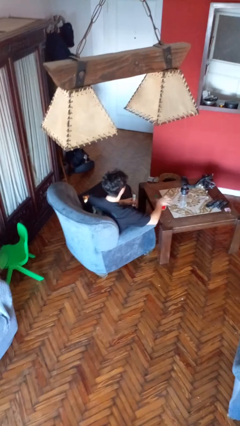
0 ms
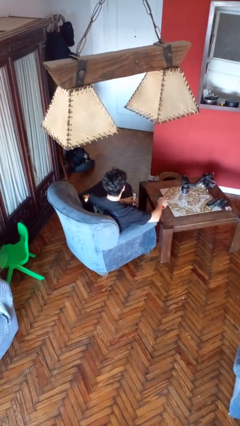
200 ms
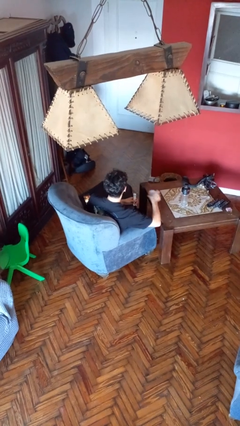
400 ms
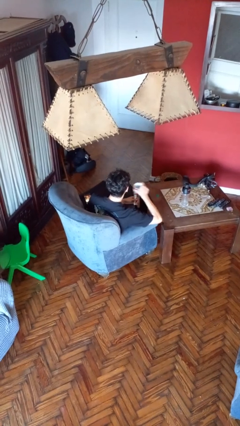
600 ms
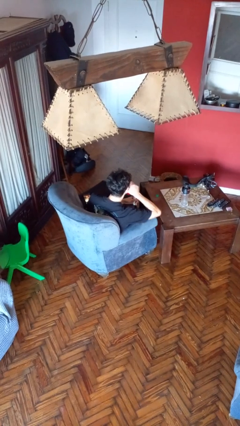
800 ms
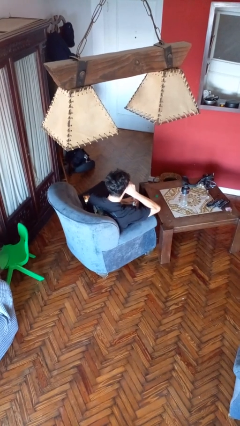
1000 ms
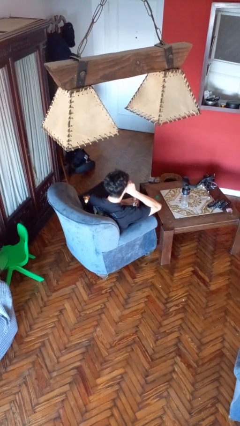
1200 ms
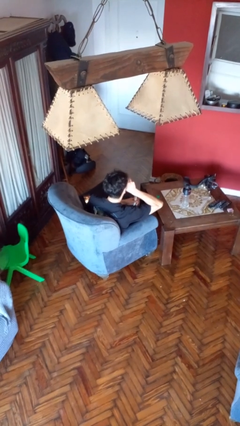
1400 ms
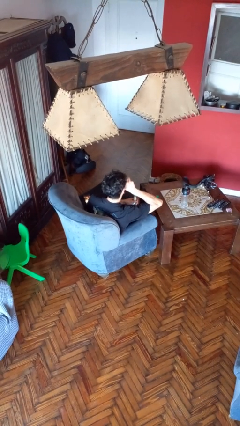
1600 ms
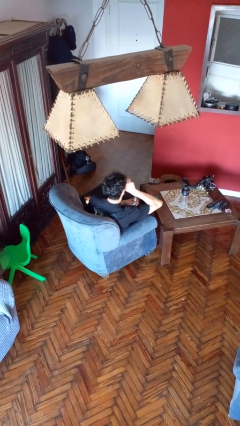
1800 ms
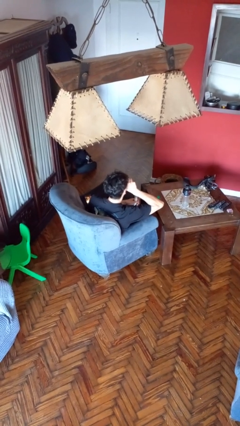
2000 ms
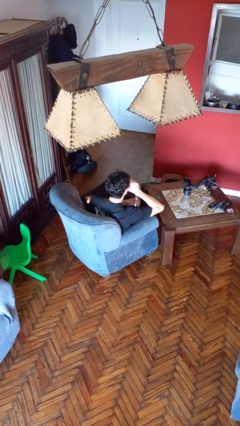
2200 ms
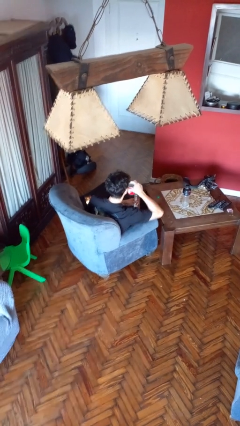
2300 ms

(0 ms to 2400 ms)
person drinks from cup

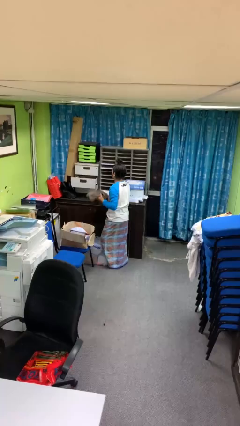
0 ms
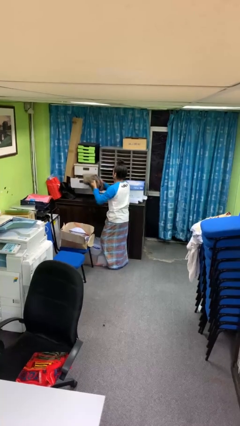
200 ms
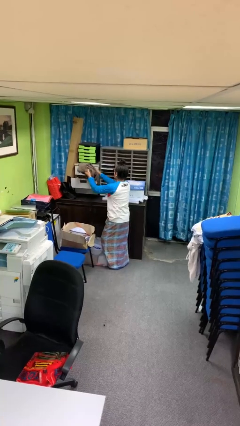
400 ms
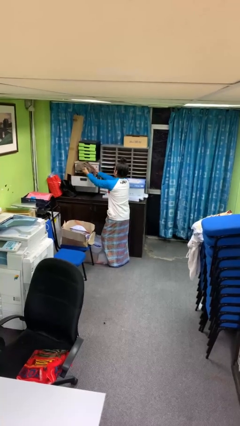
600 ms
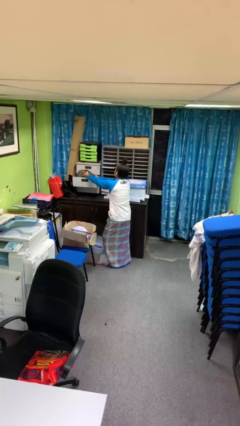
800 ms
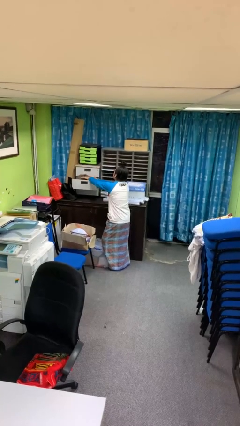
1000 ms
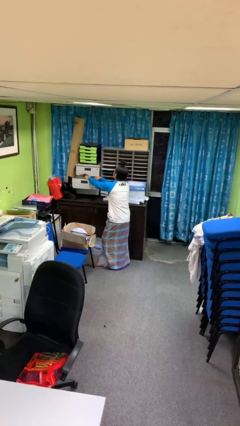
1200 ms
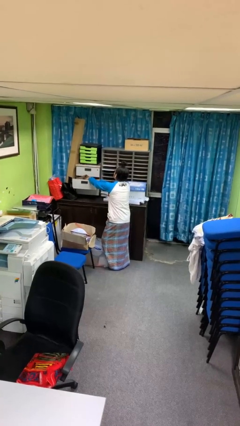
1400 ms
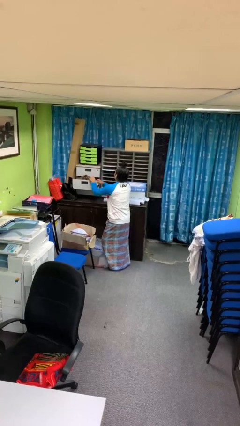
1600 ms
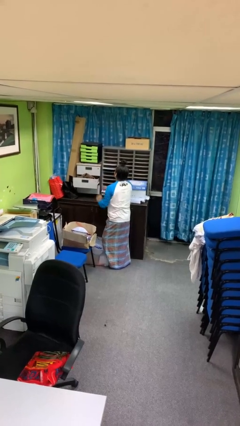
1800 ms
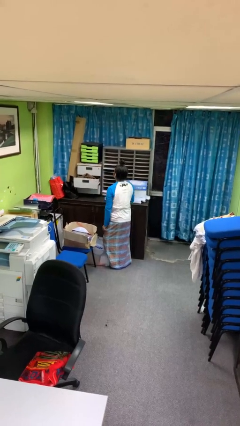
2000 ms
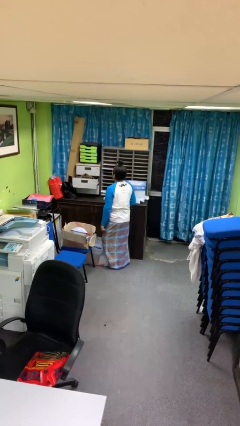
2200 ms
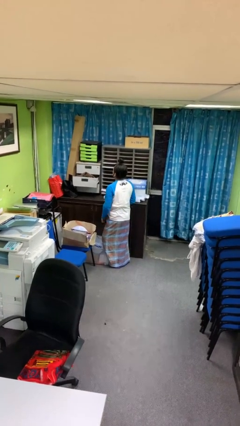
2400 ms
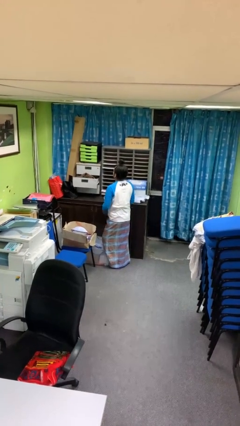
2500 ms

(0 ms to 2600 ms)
person puts clothes into dresser

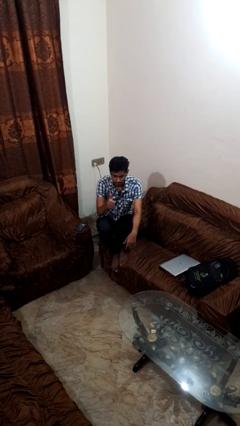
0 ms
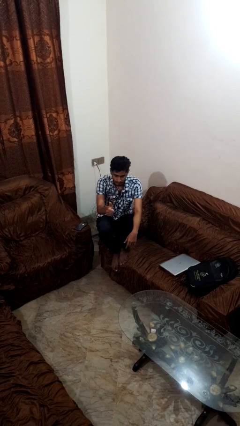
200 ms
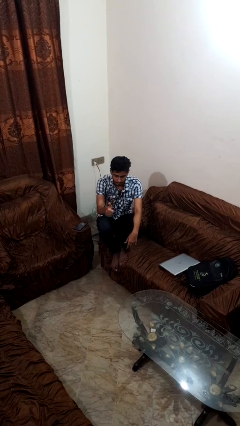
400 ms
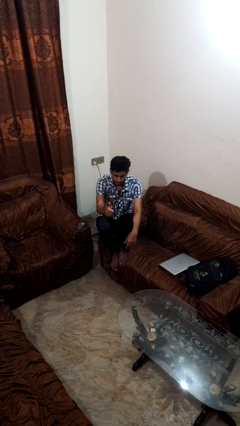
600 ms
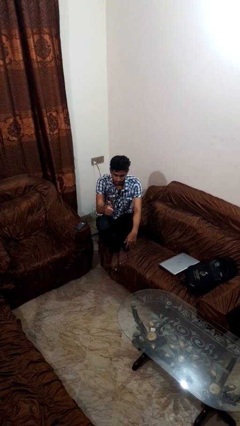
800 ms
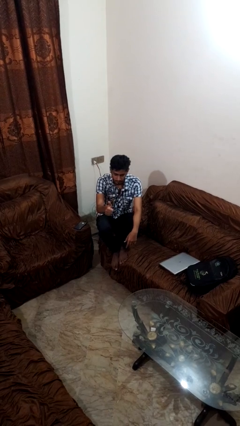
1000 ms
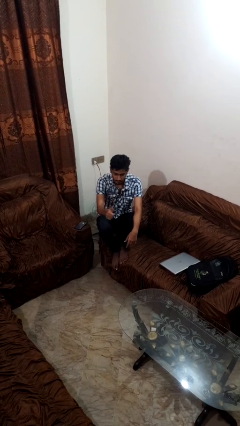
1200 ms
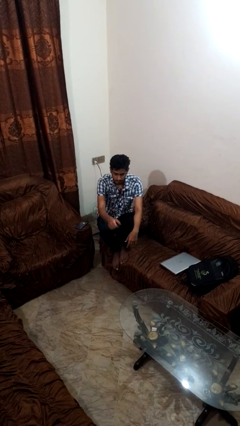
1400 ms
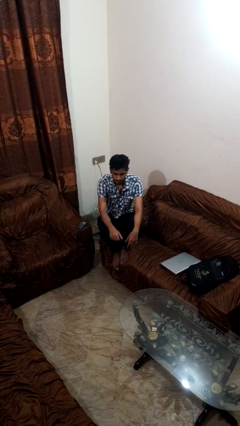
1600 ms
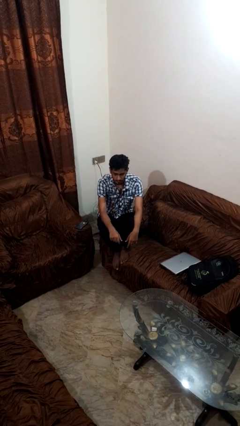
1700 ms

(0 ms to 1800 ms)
person gestures thumbs up

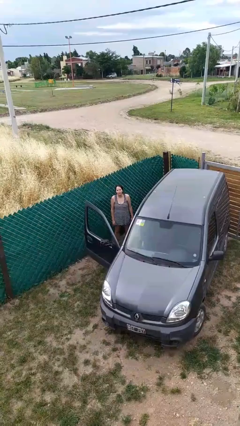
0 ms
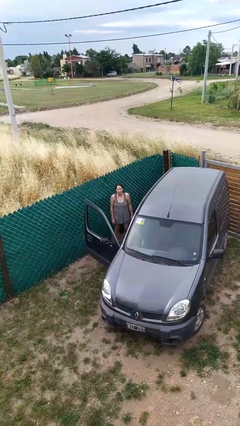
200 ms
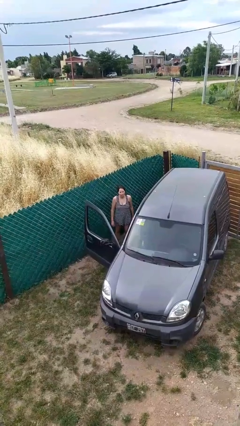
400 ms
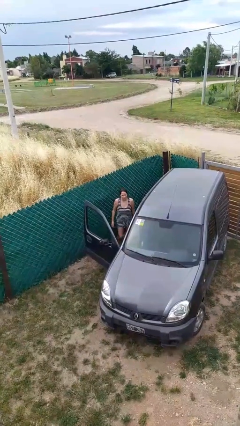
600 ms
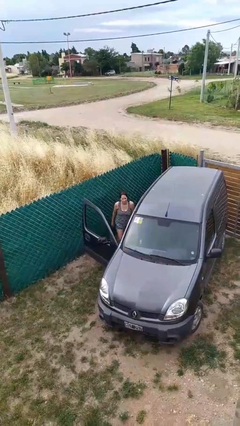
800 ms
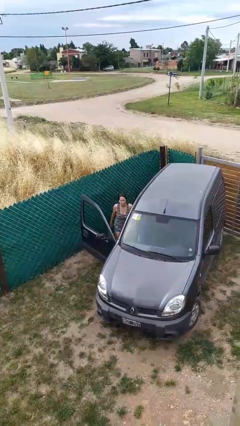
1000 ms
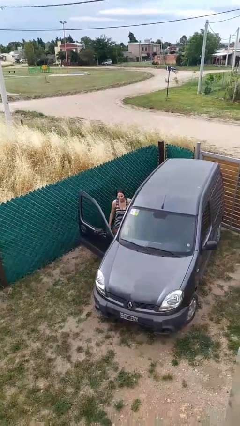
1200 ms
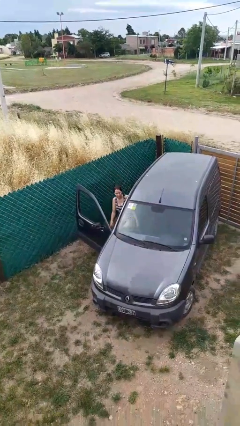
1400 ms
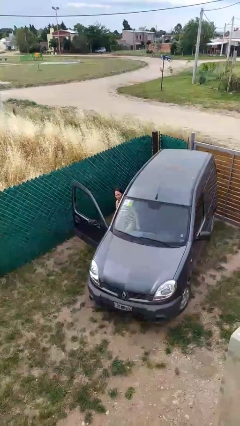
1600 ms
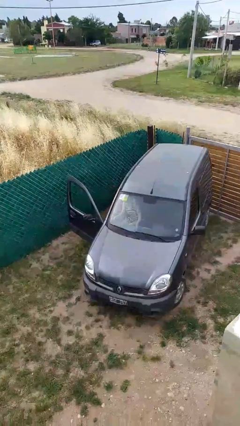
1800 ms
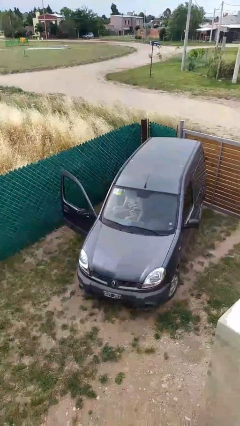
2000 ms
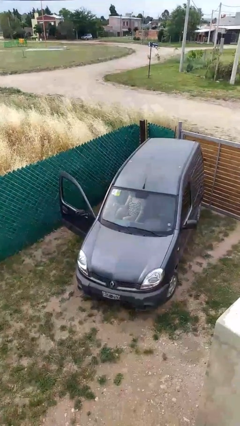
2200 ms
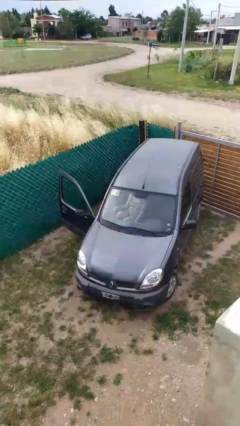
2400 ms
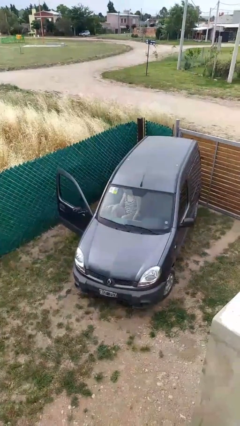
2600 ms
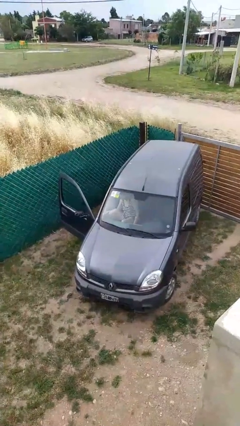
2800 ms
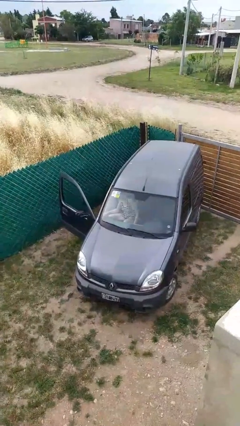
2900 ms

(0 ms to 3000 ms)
person enters car

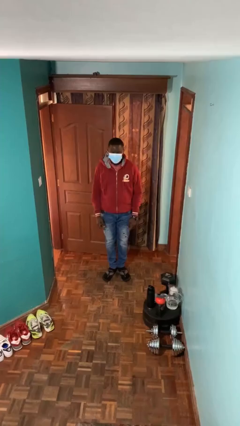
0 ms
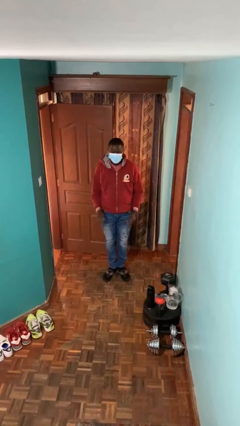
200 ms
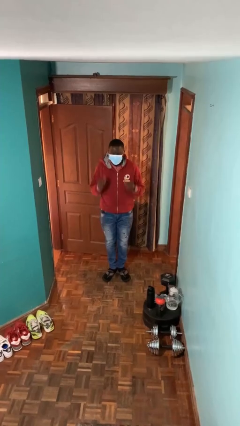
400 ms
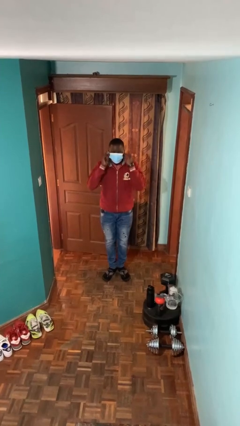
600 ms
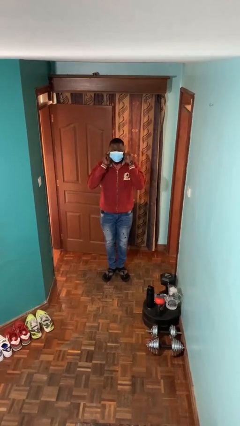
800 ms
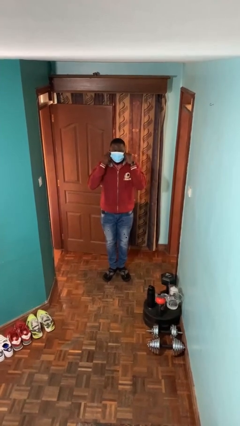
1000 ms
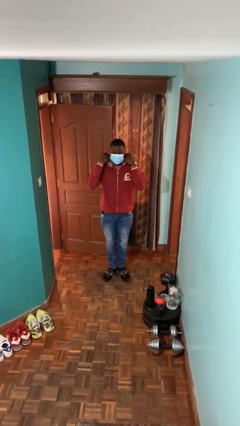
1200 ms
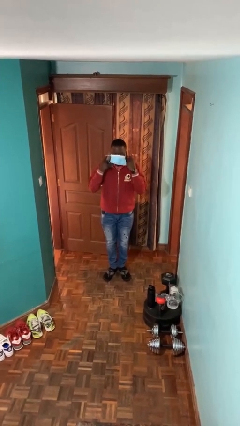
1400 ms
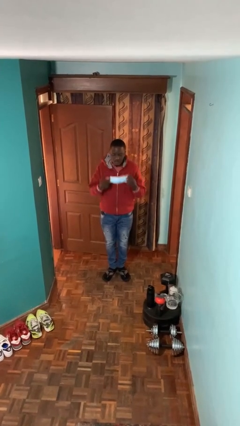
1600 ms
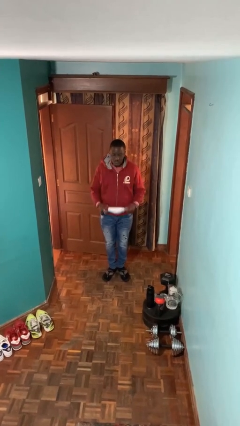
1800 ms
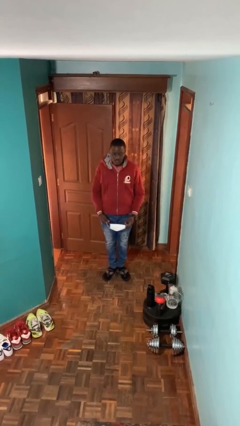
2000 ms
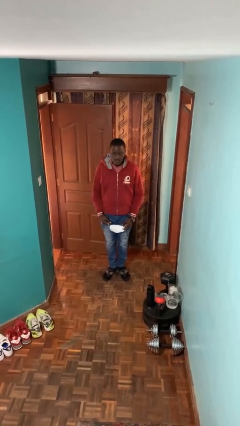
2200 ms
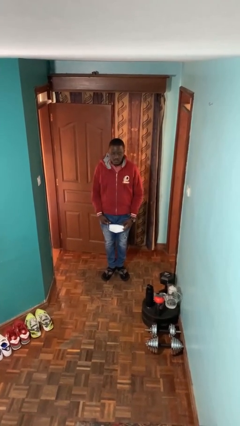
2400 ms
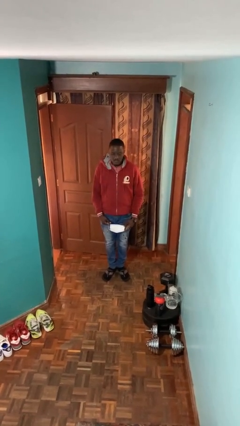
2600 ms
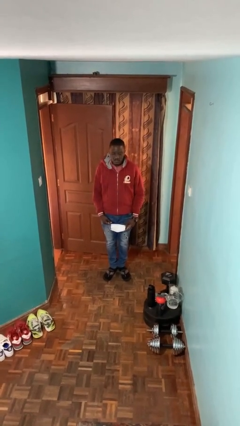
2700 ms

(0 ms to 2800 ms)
person takes off facemask

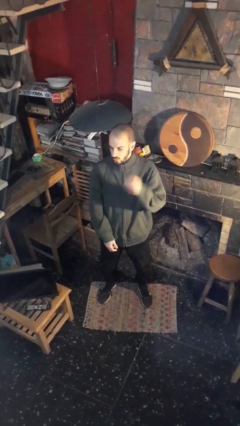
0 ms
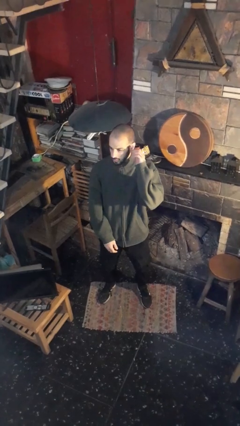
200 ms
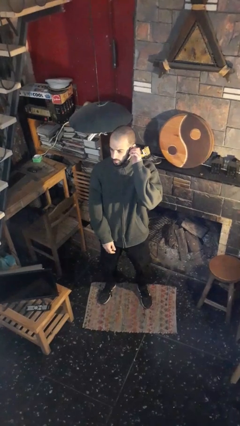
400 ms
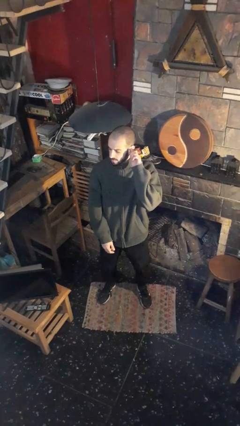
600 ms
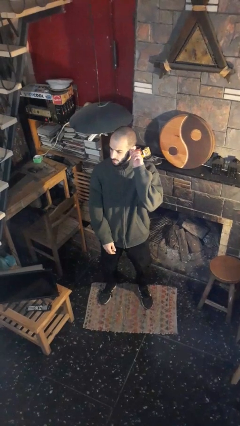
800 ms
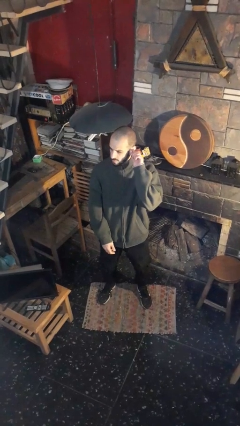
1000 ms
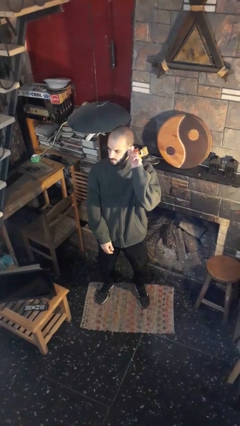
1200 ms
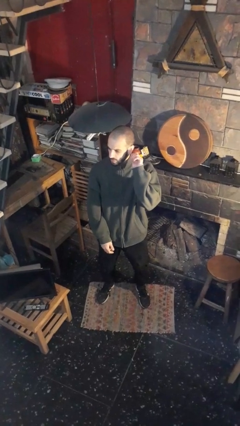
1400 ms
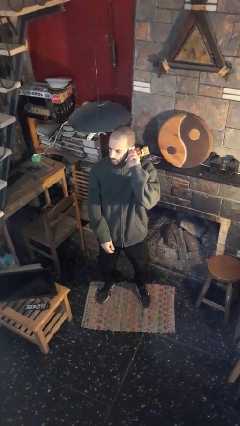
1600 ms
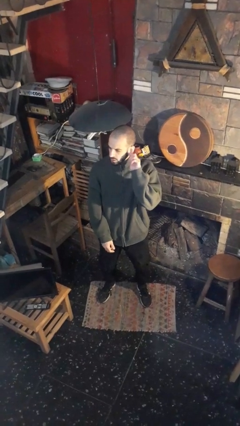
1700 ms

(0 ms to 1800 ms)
person touches earlobe

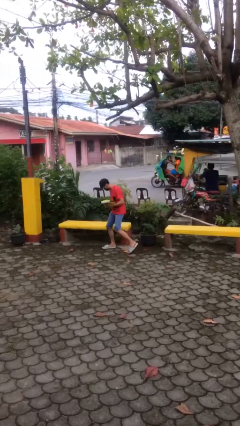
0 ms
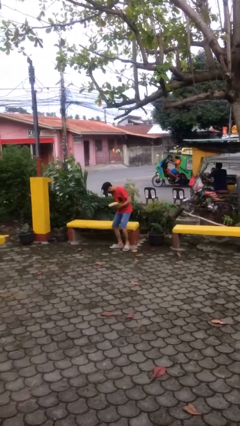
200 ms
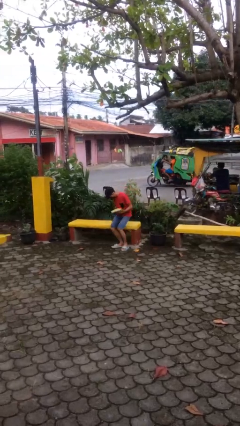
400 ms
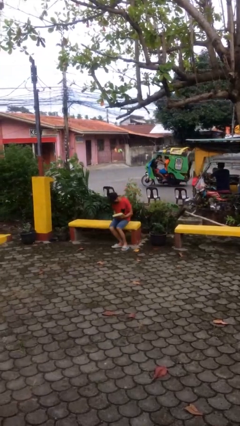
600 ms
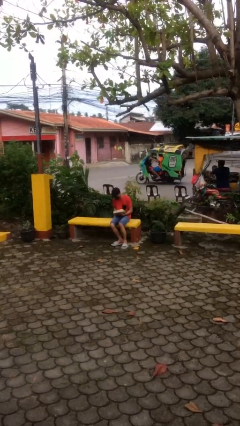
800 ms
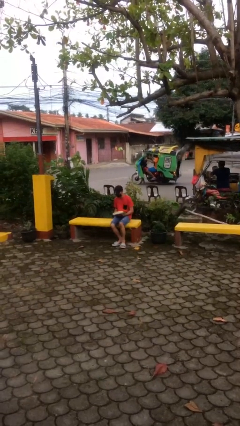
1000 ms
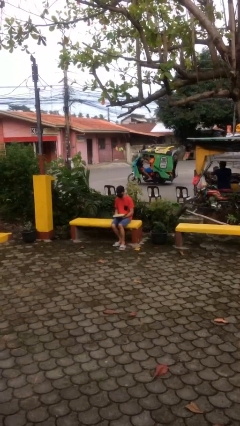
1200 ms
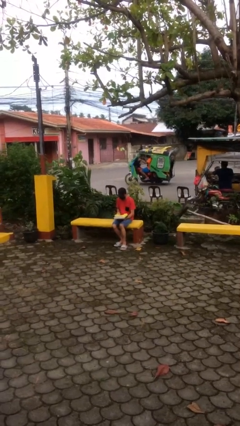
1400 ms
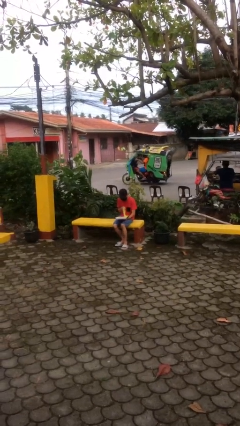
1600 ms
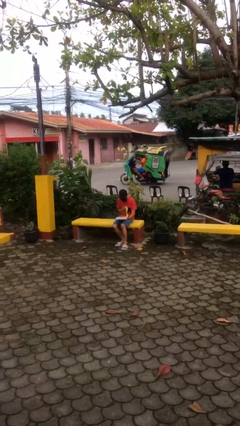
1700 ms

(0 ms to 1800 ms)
person sits down

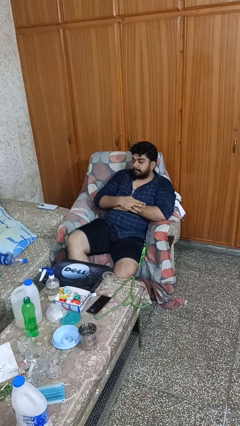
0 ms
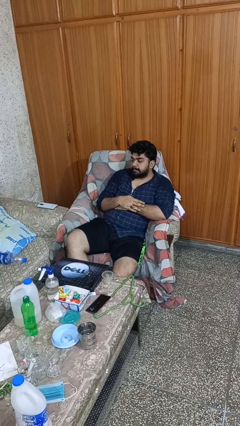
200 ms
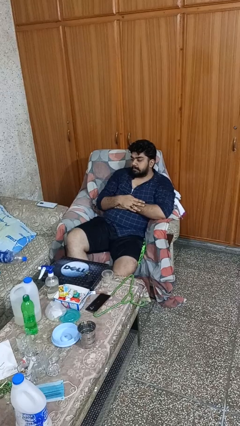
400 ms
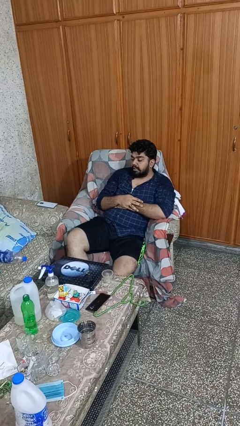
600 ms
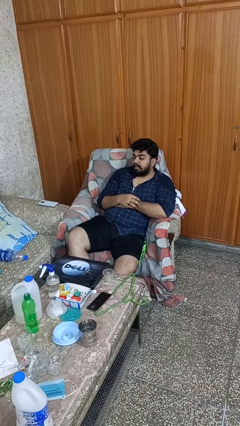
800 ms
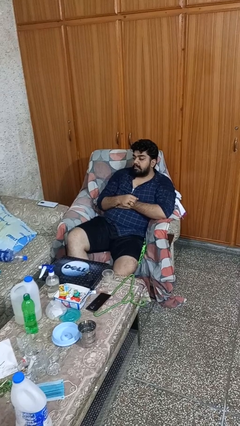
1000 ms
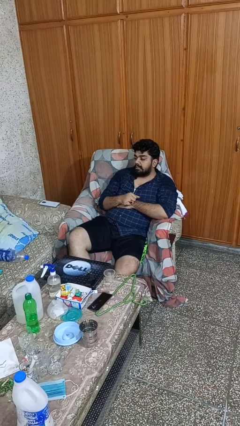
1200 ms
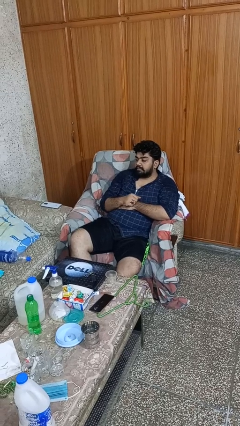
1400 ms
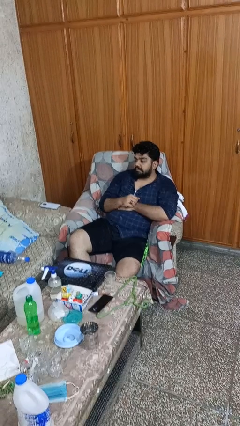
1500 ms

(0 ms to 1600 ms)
person gestures lower hand
